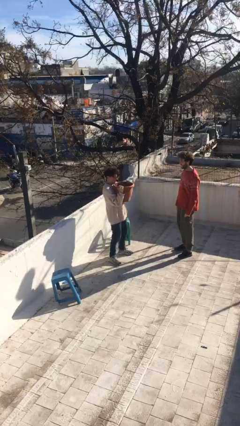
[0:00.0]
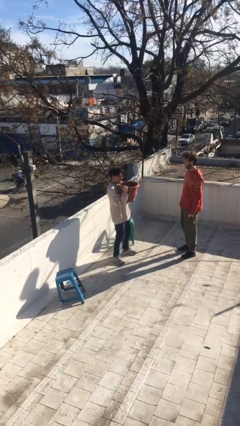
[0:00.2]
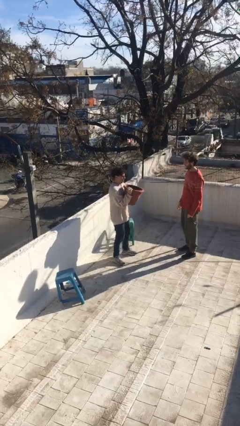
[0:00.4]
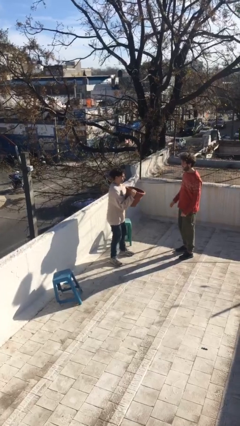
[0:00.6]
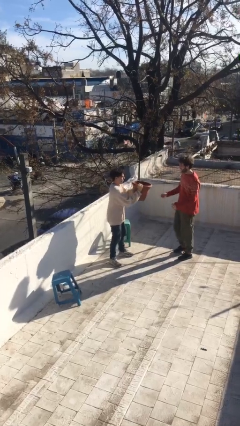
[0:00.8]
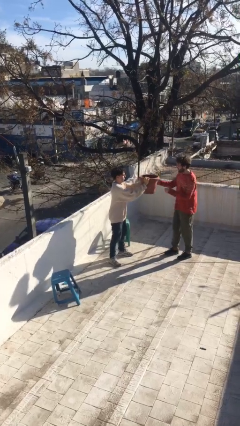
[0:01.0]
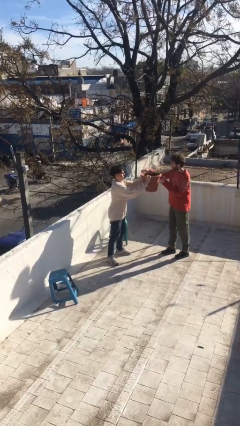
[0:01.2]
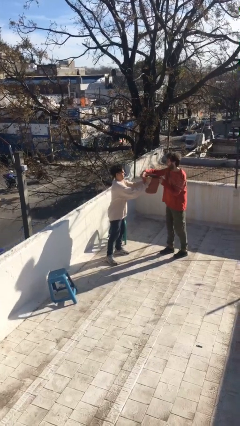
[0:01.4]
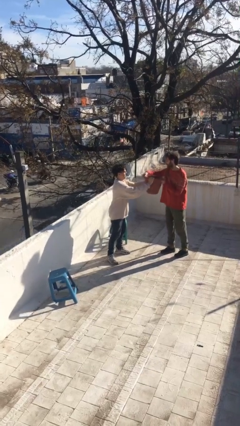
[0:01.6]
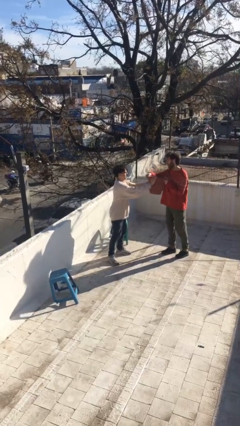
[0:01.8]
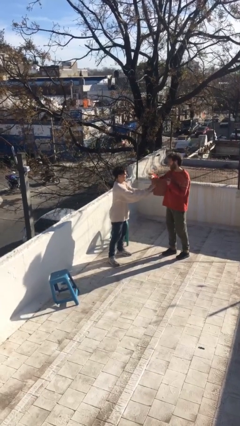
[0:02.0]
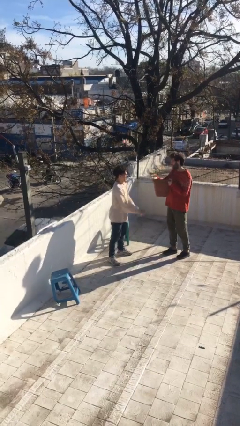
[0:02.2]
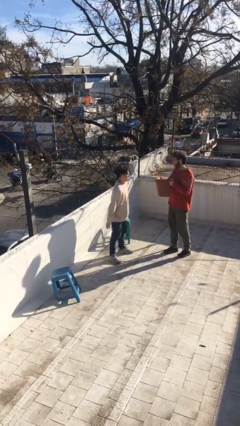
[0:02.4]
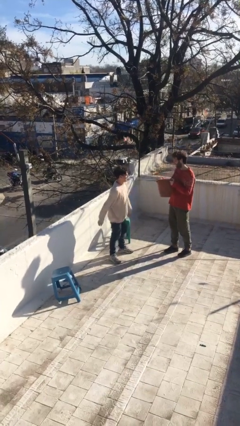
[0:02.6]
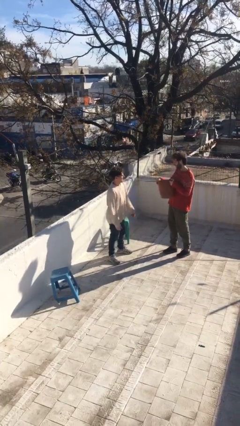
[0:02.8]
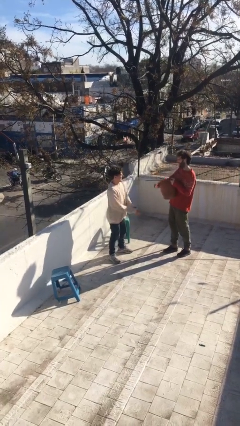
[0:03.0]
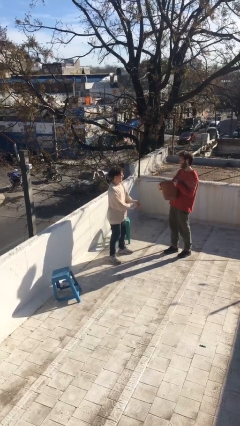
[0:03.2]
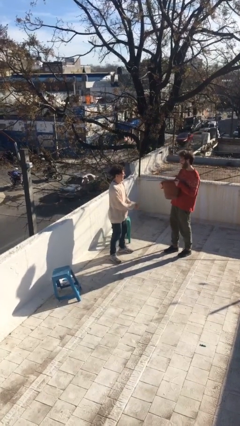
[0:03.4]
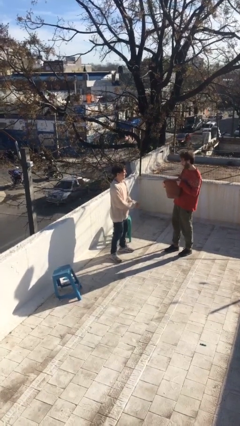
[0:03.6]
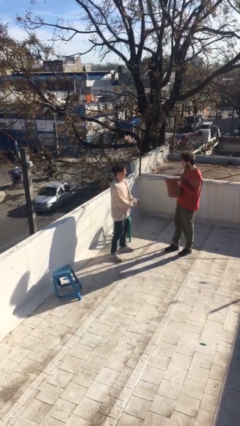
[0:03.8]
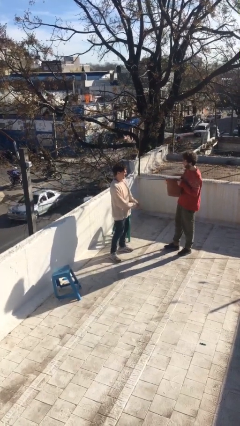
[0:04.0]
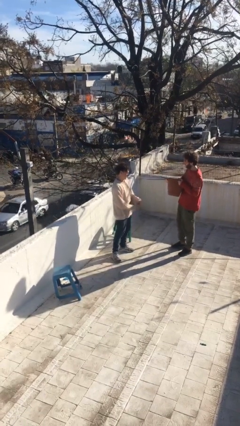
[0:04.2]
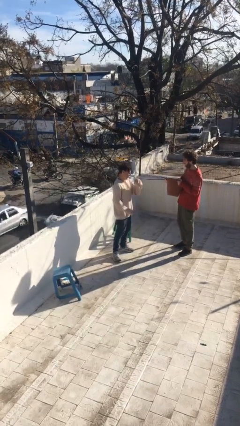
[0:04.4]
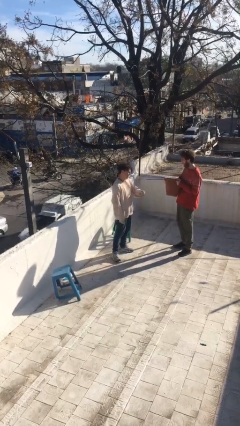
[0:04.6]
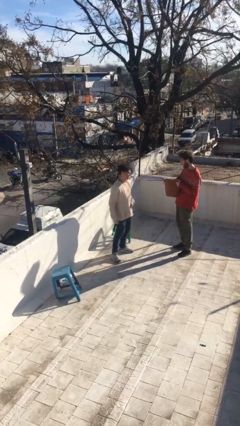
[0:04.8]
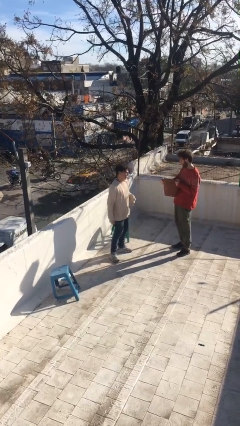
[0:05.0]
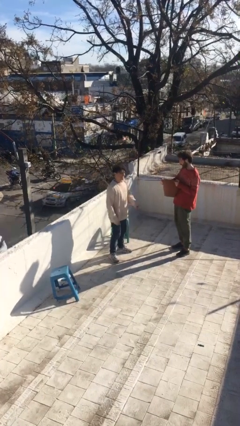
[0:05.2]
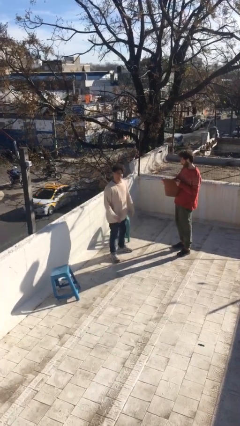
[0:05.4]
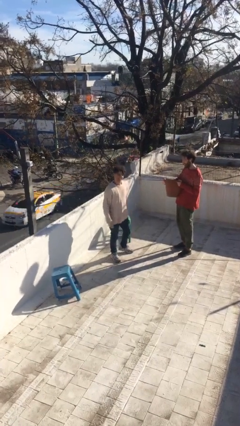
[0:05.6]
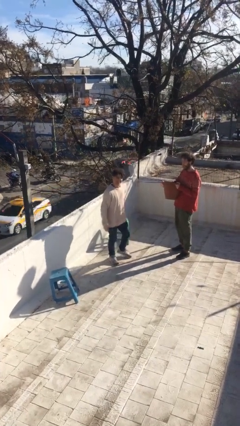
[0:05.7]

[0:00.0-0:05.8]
person transfers object to person

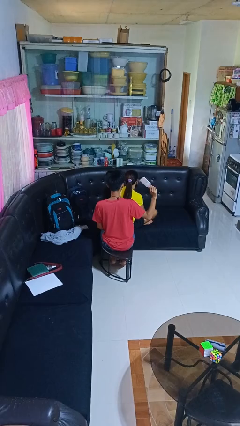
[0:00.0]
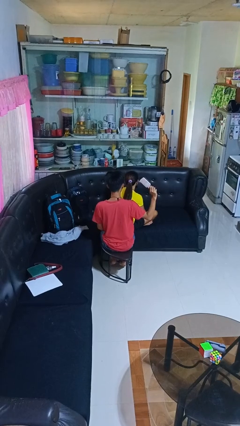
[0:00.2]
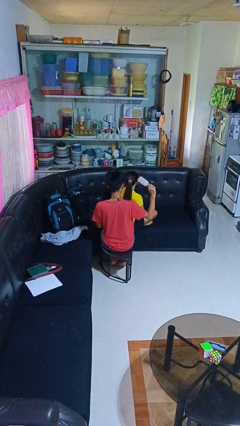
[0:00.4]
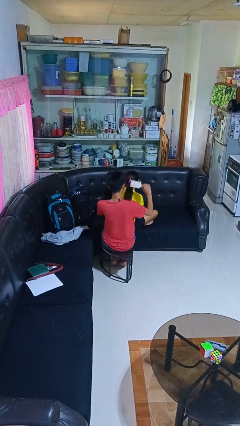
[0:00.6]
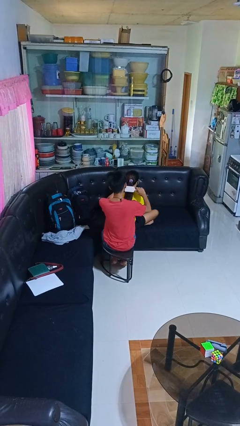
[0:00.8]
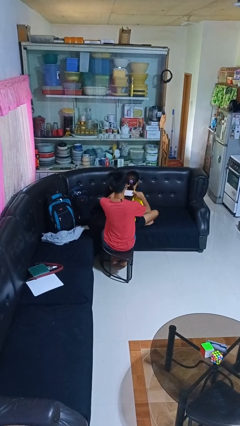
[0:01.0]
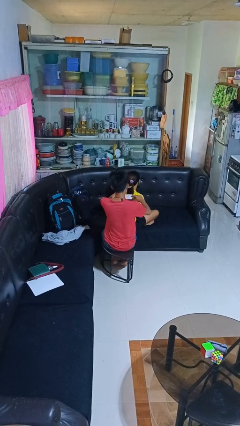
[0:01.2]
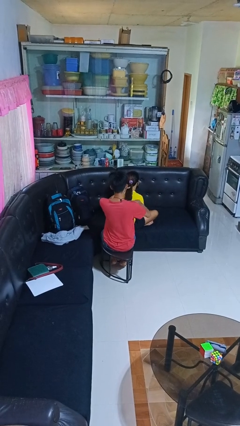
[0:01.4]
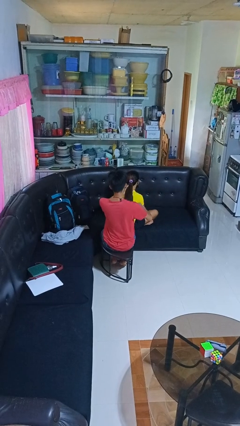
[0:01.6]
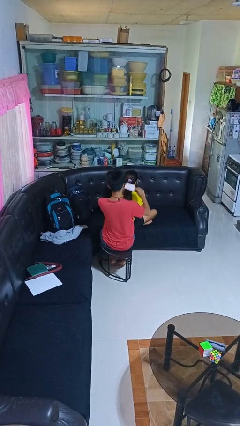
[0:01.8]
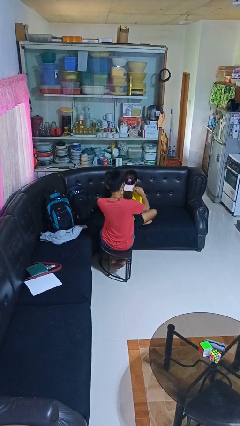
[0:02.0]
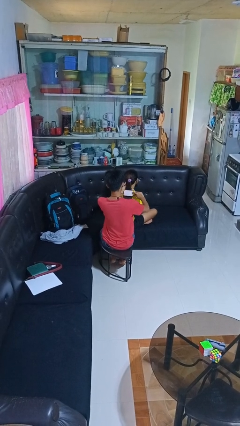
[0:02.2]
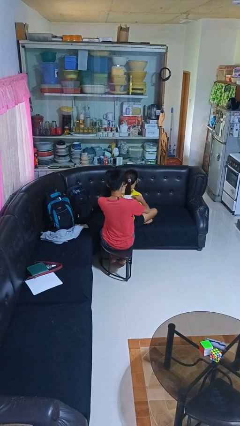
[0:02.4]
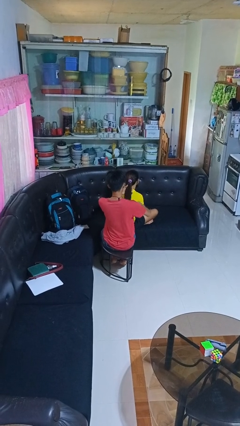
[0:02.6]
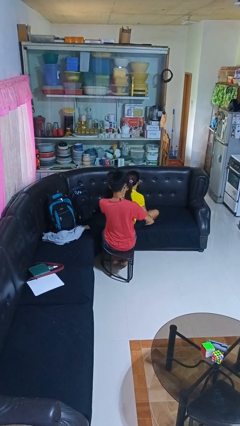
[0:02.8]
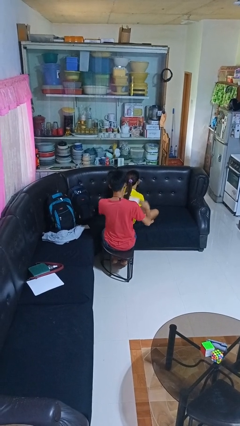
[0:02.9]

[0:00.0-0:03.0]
person brushes hair of person

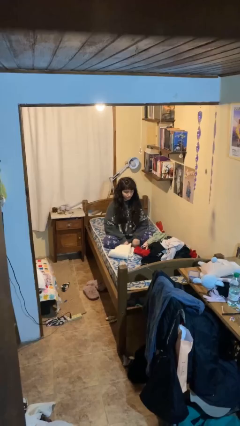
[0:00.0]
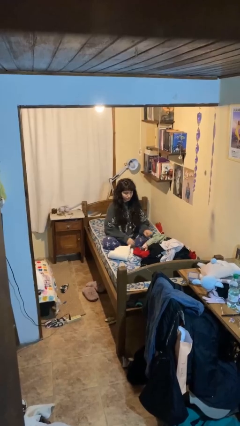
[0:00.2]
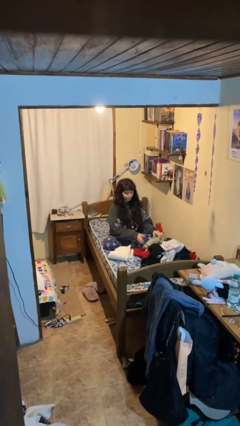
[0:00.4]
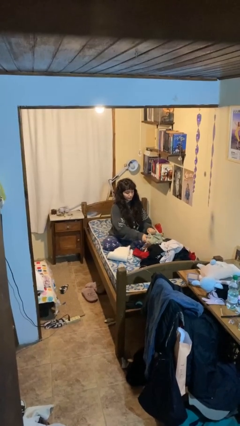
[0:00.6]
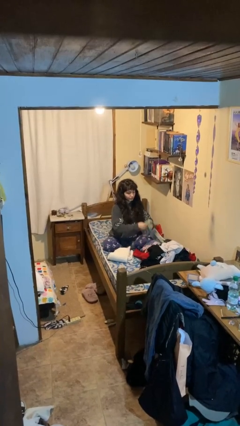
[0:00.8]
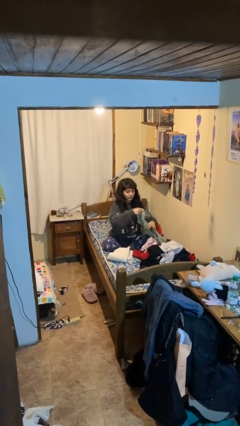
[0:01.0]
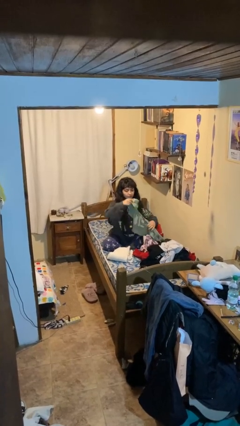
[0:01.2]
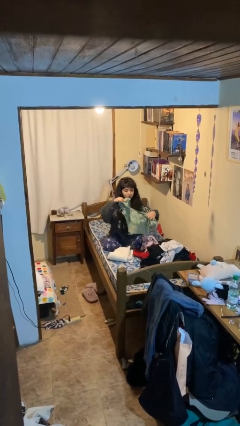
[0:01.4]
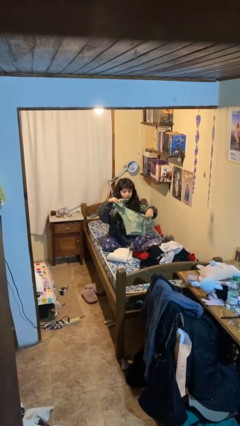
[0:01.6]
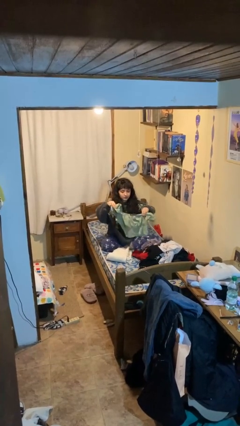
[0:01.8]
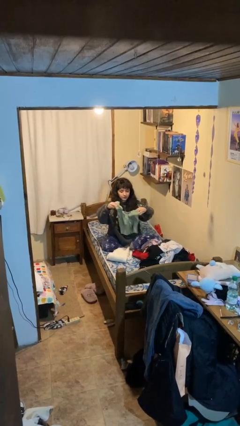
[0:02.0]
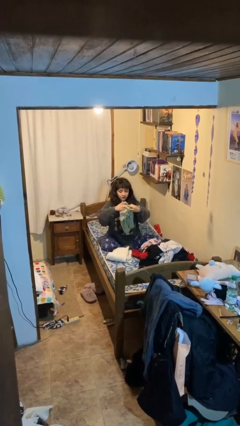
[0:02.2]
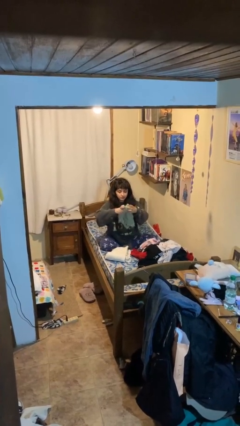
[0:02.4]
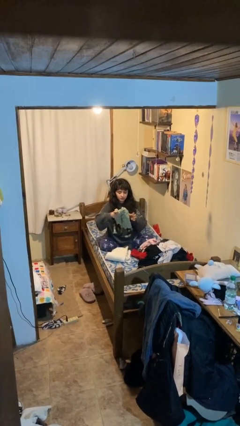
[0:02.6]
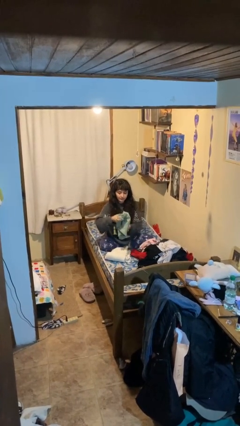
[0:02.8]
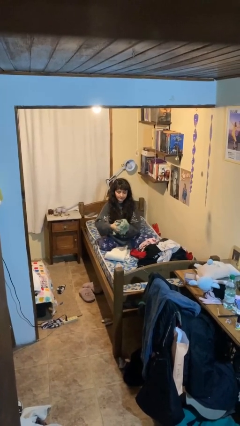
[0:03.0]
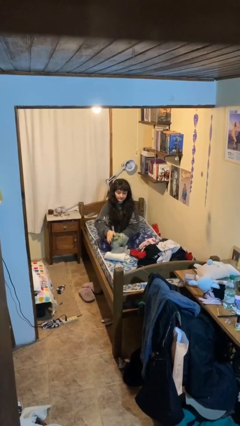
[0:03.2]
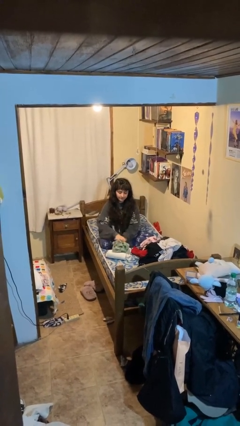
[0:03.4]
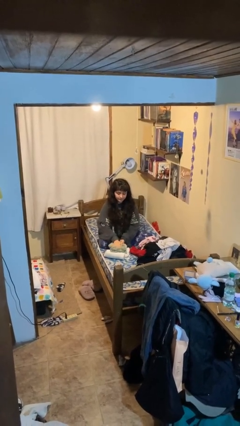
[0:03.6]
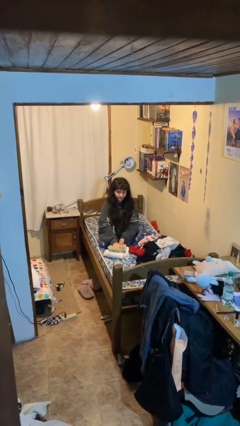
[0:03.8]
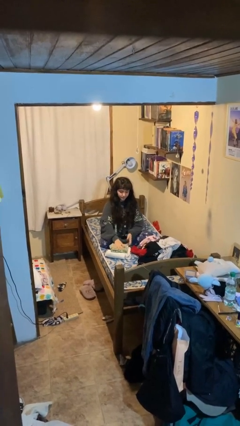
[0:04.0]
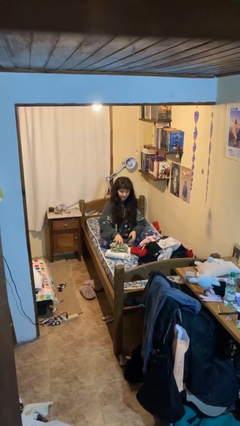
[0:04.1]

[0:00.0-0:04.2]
person folds shirt

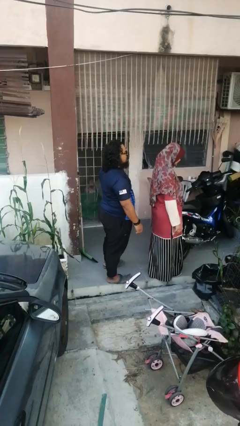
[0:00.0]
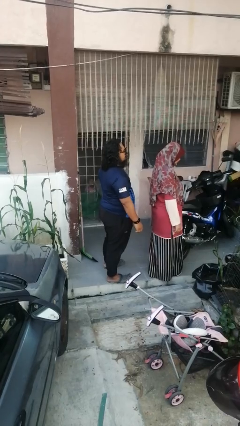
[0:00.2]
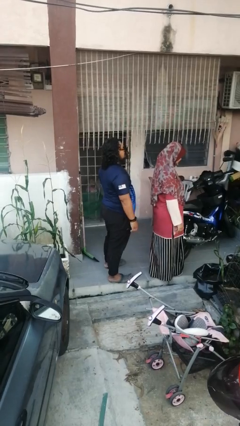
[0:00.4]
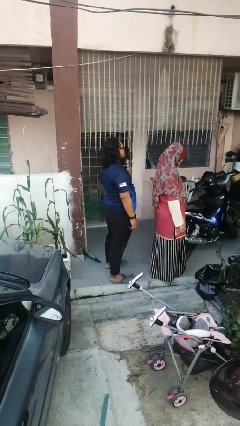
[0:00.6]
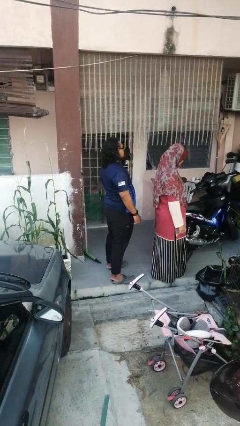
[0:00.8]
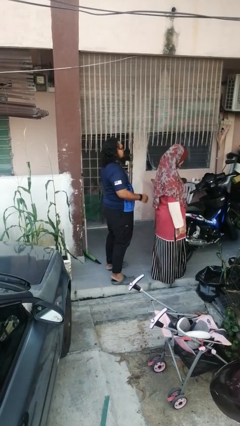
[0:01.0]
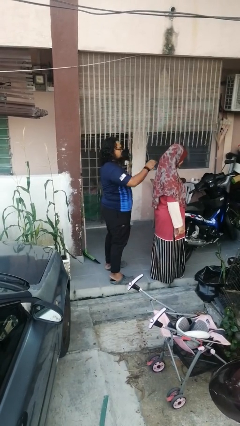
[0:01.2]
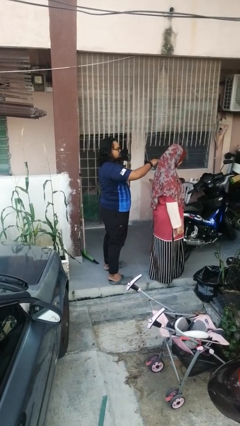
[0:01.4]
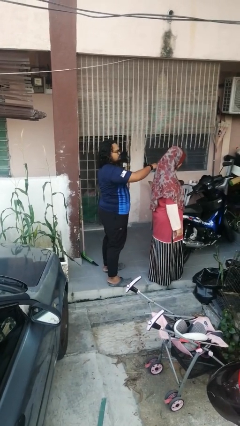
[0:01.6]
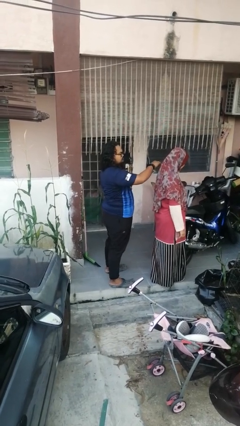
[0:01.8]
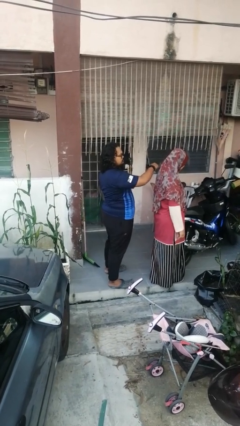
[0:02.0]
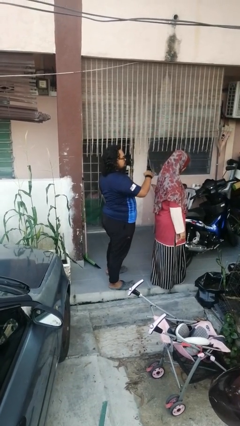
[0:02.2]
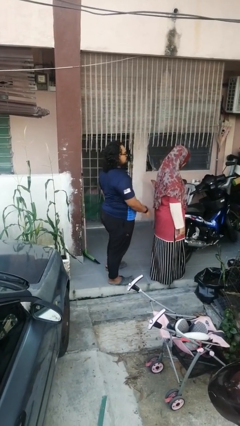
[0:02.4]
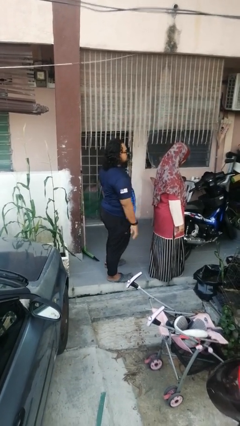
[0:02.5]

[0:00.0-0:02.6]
person touches back of person

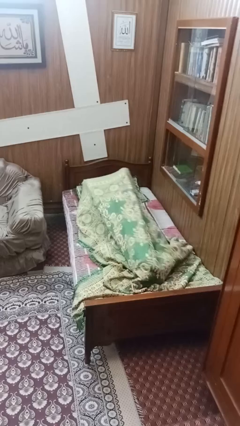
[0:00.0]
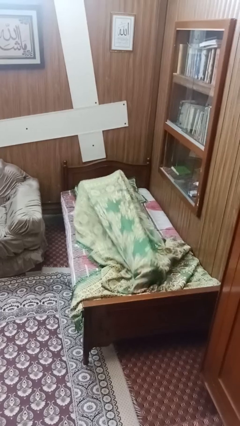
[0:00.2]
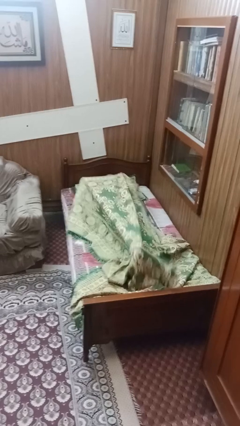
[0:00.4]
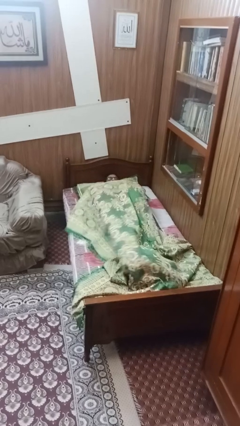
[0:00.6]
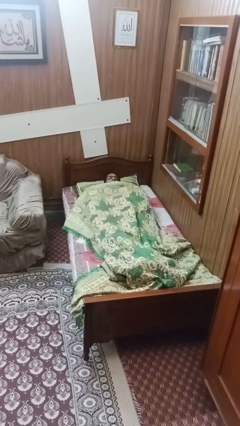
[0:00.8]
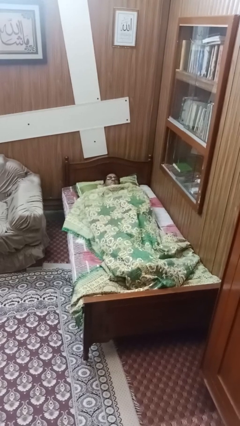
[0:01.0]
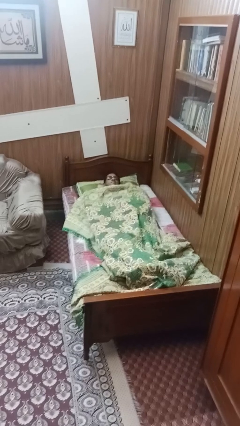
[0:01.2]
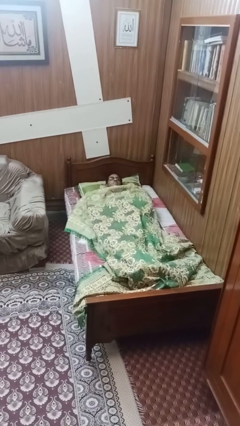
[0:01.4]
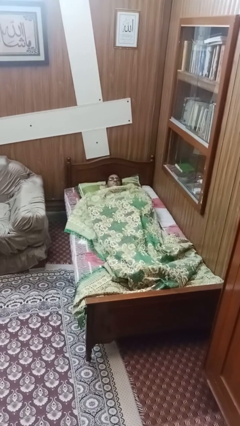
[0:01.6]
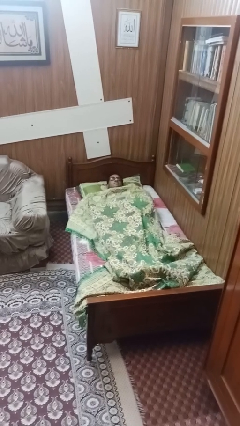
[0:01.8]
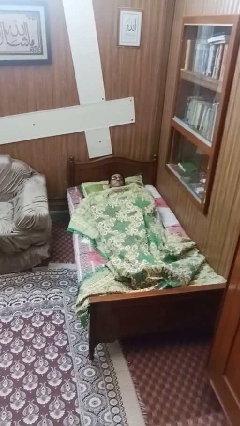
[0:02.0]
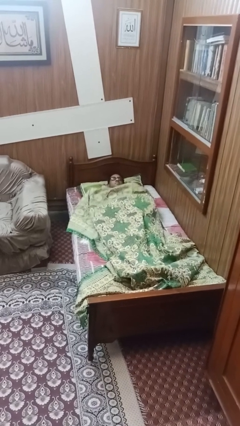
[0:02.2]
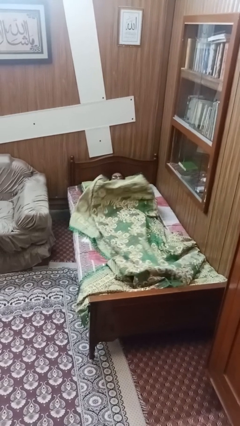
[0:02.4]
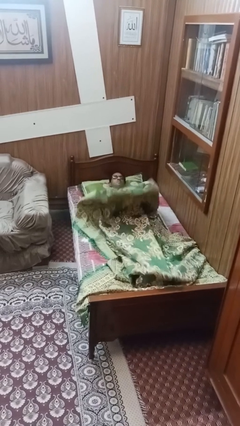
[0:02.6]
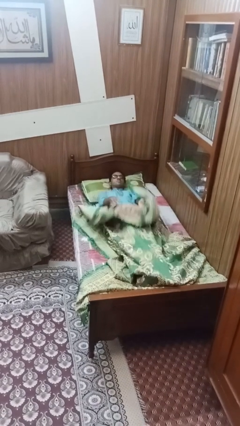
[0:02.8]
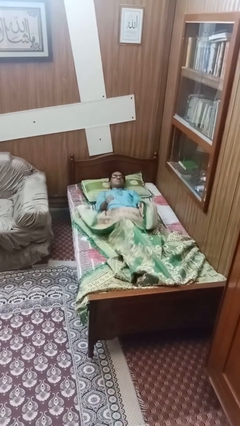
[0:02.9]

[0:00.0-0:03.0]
person covers with bedsheets
